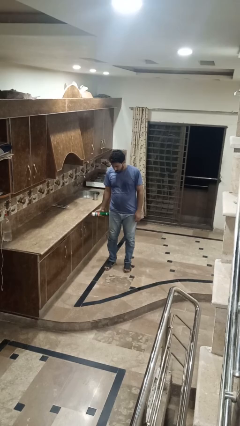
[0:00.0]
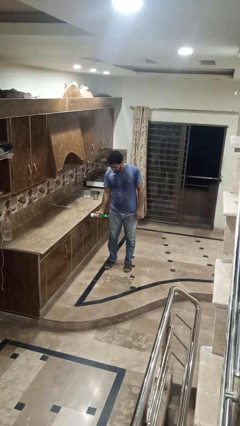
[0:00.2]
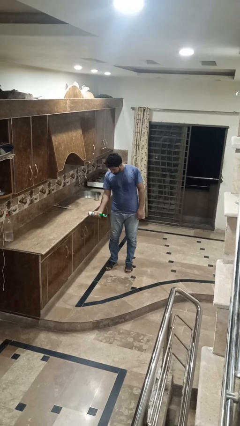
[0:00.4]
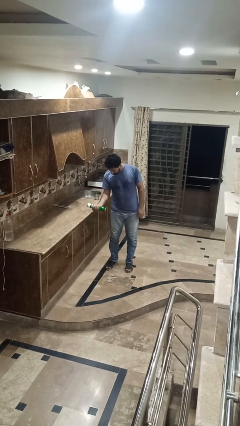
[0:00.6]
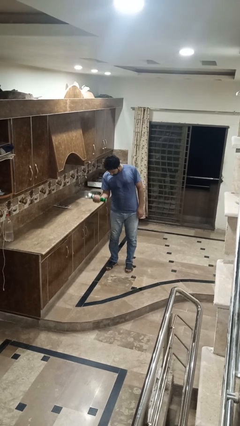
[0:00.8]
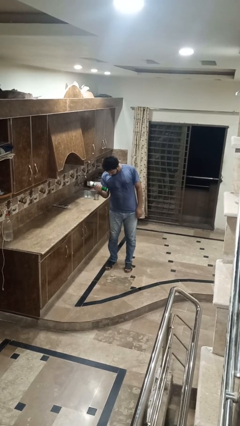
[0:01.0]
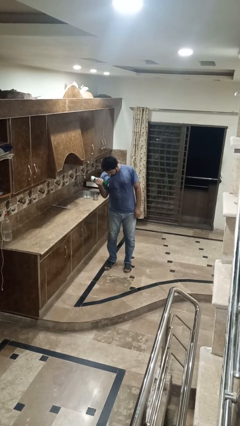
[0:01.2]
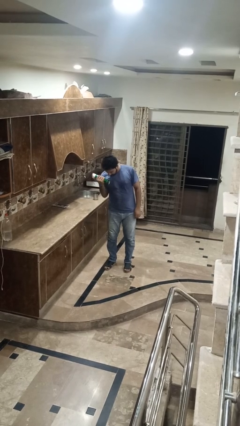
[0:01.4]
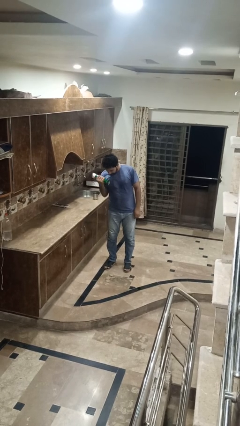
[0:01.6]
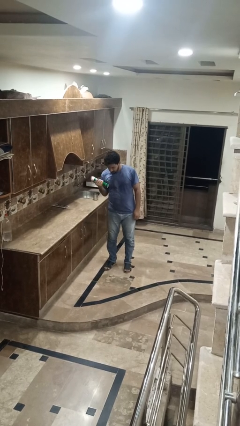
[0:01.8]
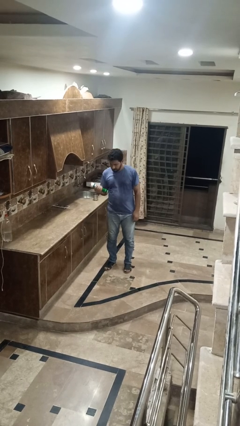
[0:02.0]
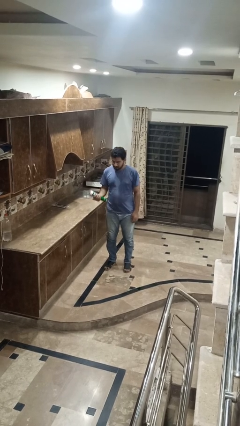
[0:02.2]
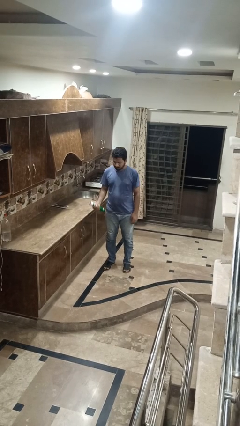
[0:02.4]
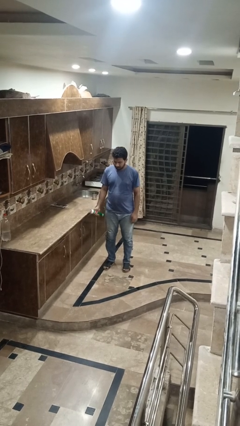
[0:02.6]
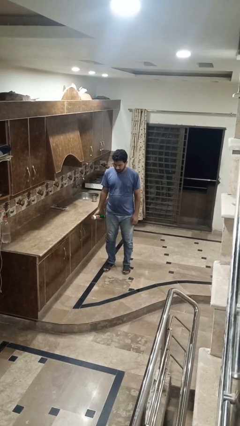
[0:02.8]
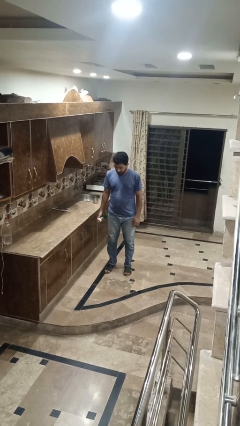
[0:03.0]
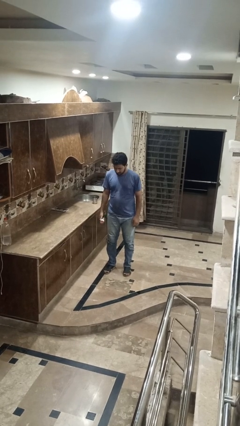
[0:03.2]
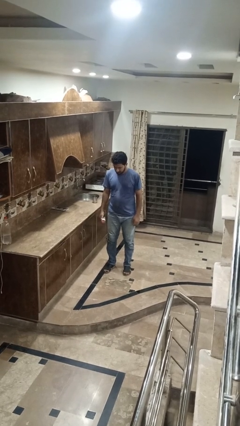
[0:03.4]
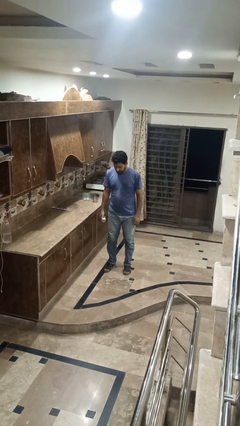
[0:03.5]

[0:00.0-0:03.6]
person lifts dumbbells

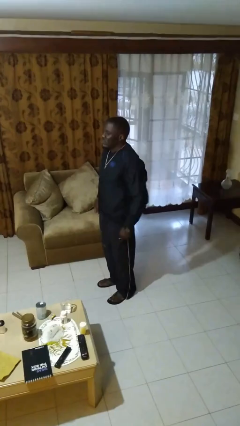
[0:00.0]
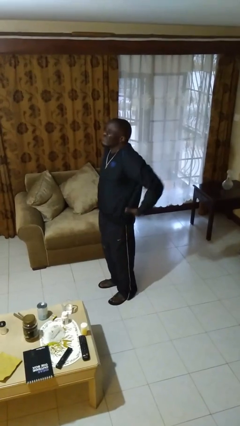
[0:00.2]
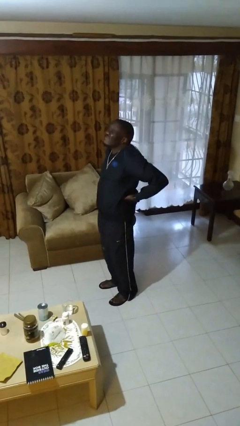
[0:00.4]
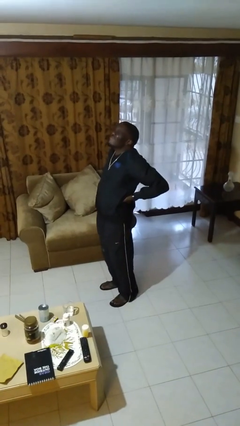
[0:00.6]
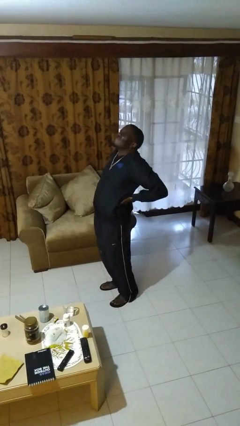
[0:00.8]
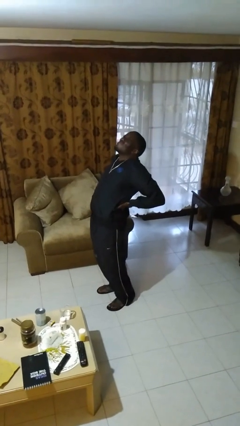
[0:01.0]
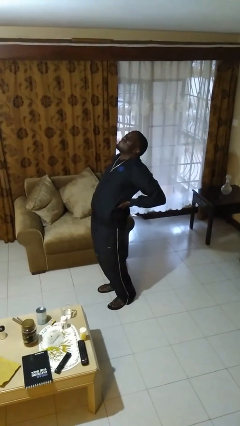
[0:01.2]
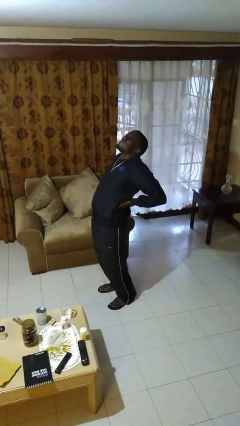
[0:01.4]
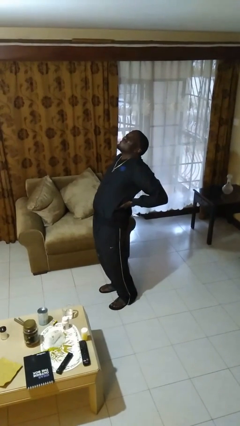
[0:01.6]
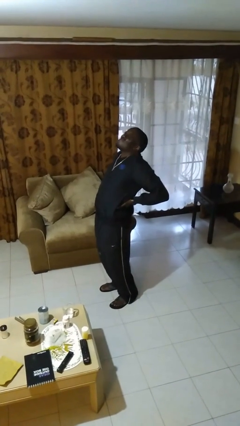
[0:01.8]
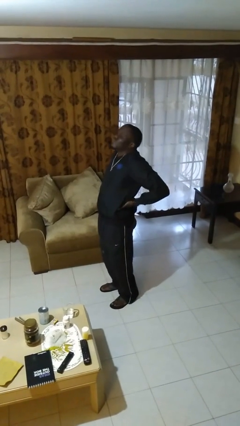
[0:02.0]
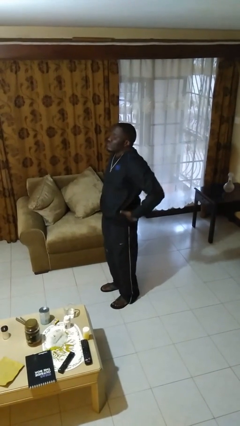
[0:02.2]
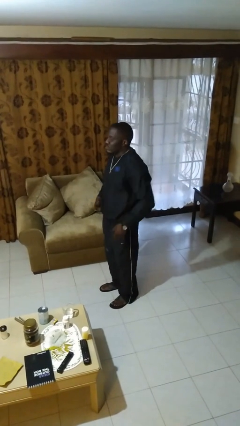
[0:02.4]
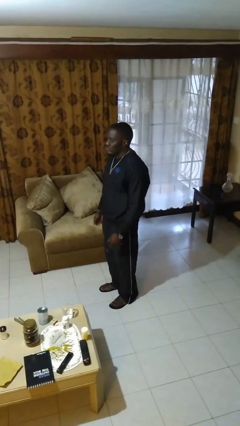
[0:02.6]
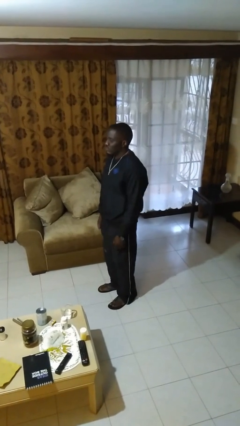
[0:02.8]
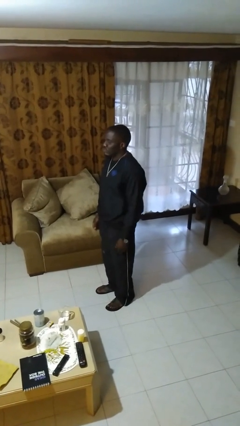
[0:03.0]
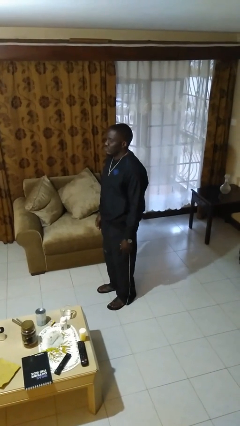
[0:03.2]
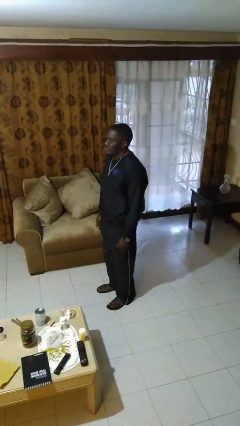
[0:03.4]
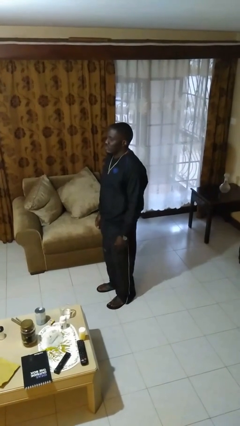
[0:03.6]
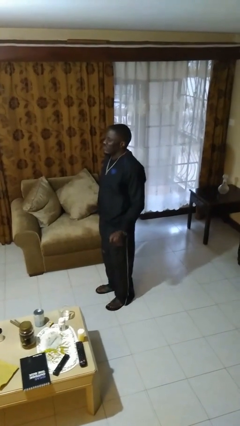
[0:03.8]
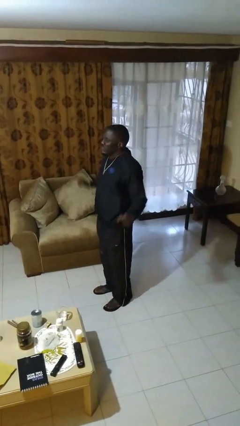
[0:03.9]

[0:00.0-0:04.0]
person stretches back

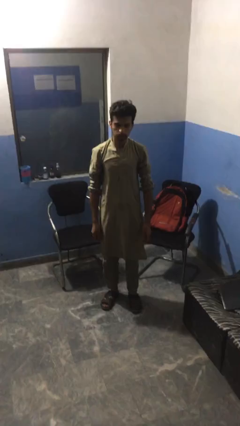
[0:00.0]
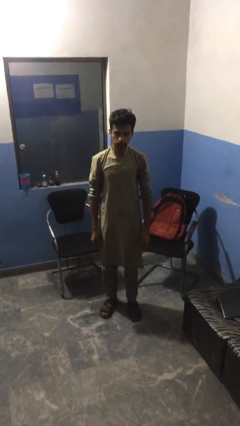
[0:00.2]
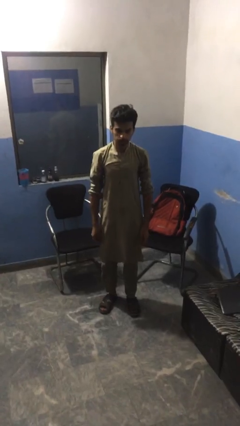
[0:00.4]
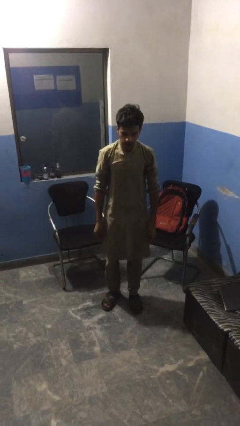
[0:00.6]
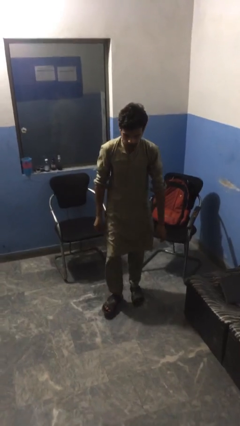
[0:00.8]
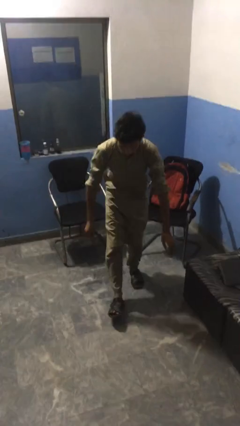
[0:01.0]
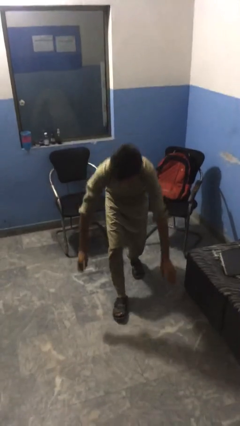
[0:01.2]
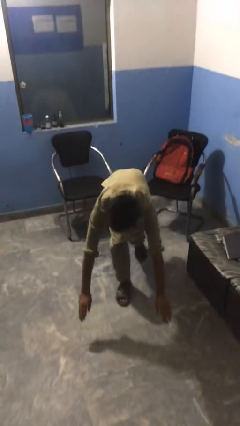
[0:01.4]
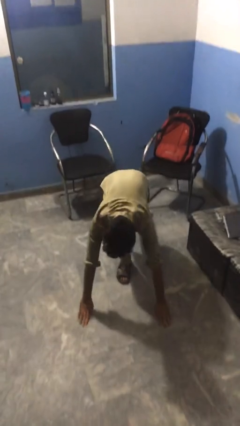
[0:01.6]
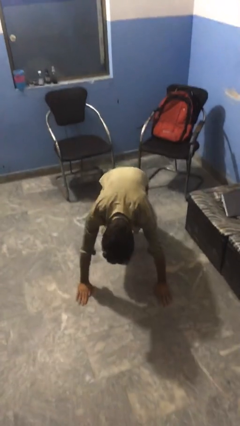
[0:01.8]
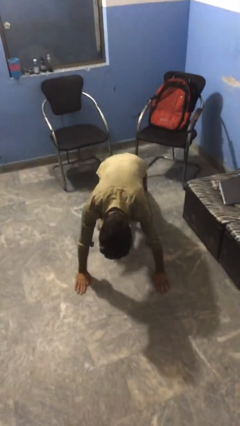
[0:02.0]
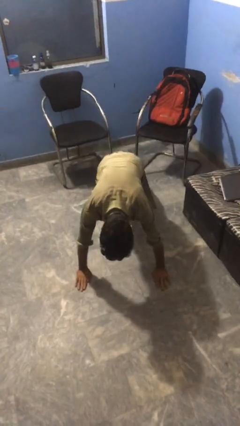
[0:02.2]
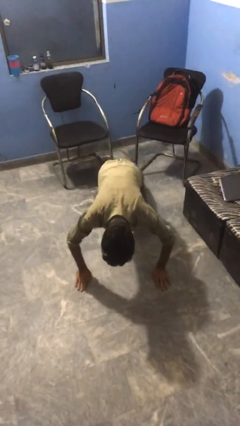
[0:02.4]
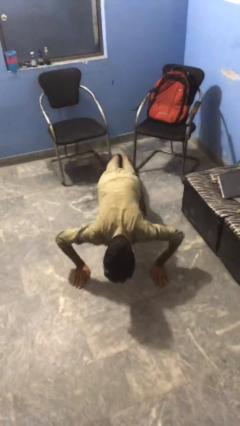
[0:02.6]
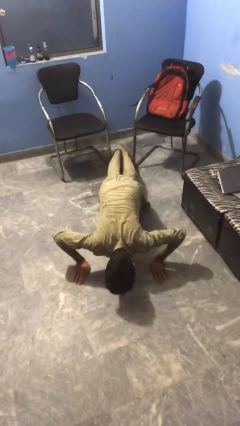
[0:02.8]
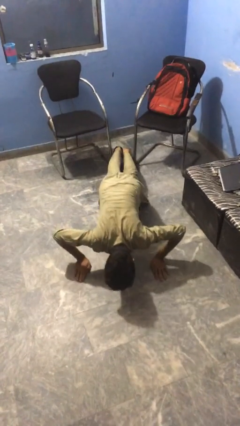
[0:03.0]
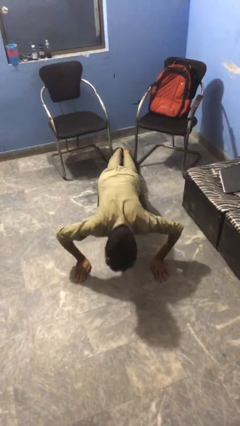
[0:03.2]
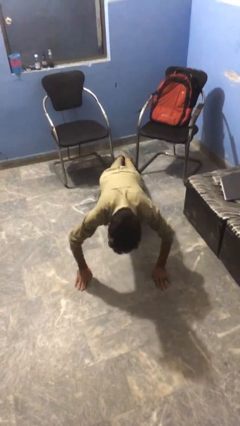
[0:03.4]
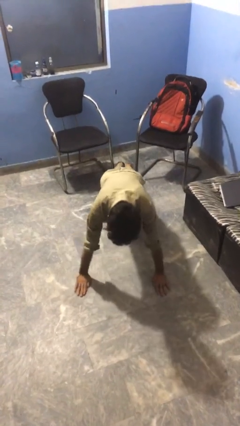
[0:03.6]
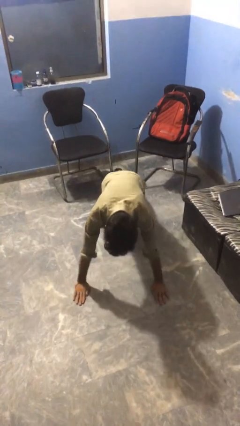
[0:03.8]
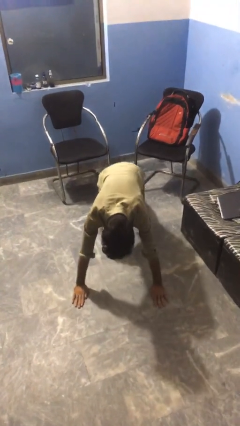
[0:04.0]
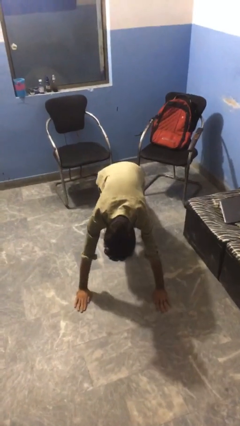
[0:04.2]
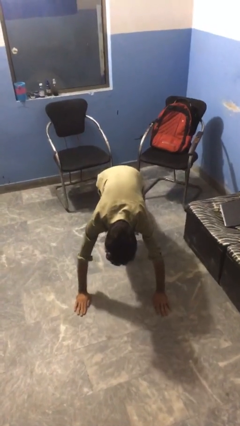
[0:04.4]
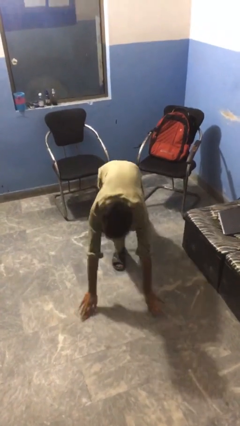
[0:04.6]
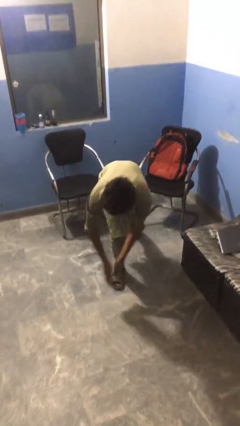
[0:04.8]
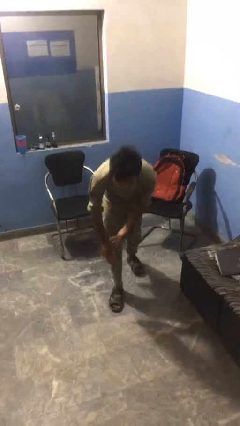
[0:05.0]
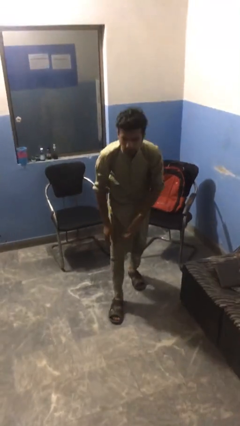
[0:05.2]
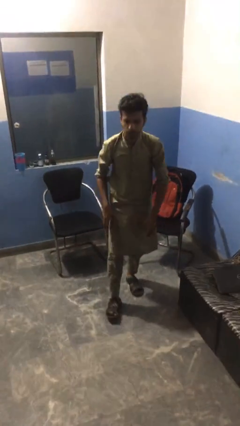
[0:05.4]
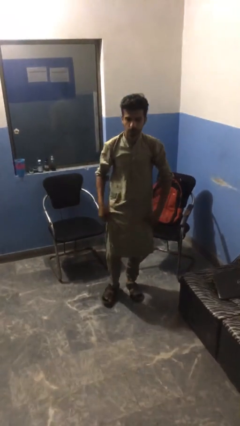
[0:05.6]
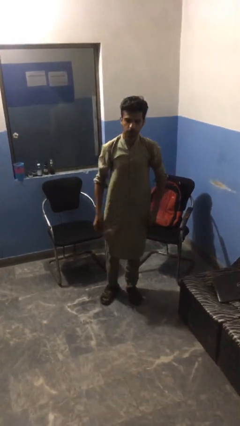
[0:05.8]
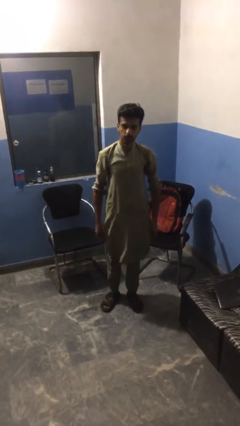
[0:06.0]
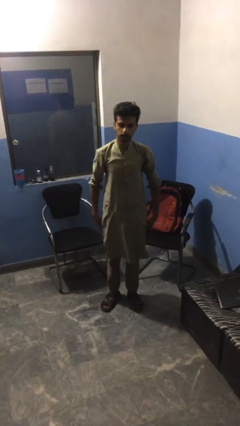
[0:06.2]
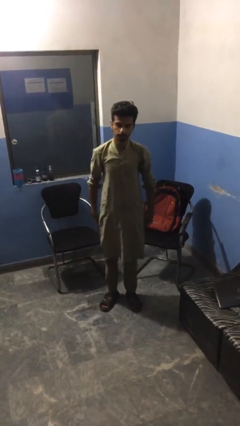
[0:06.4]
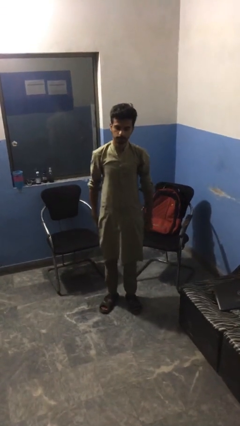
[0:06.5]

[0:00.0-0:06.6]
person exercises with pushup

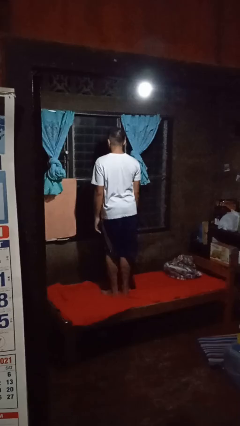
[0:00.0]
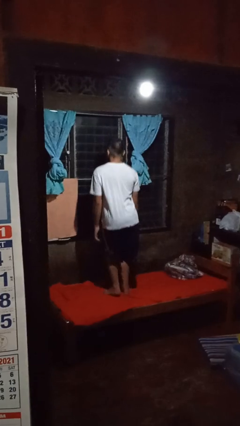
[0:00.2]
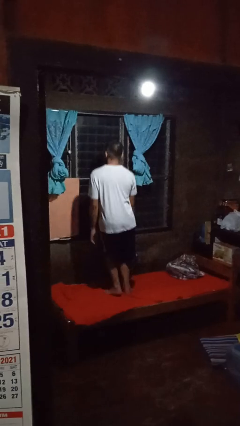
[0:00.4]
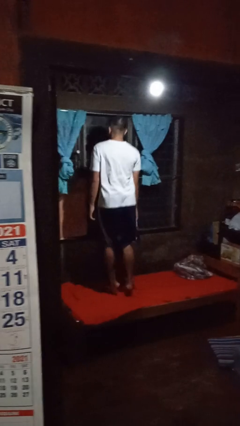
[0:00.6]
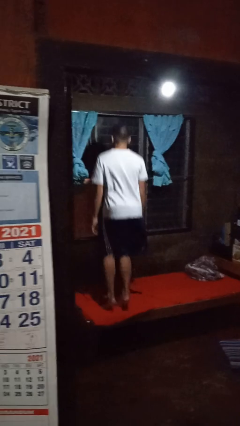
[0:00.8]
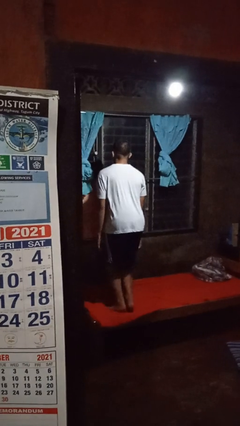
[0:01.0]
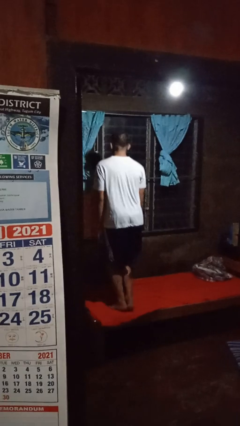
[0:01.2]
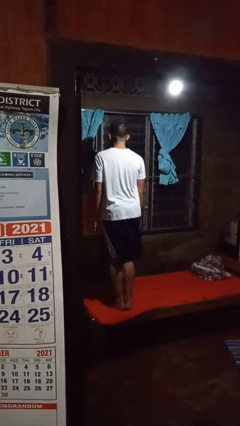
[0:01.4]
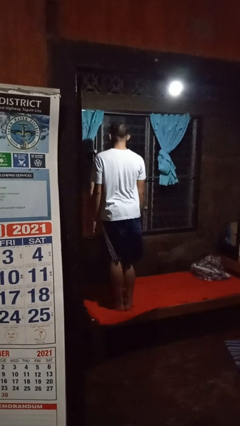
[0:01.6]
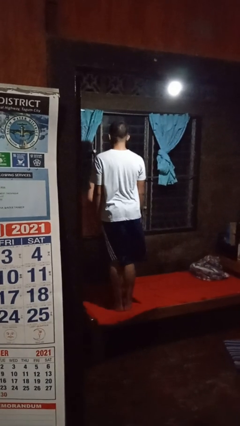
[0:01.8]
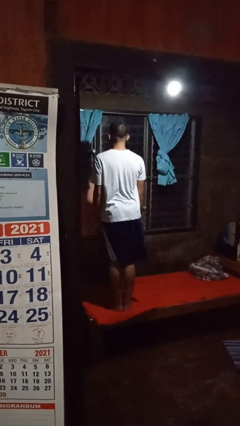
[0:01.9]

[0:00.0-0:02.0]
person jumps on bed

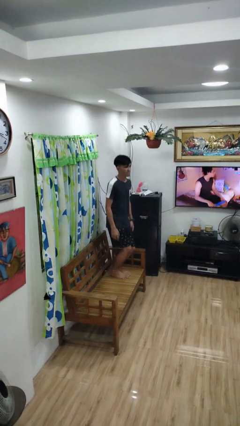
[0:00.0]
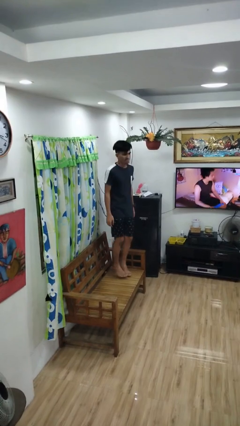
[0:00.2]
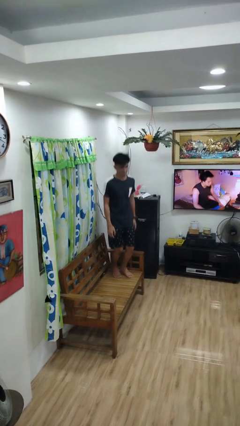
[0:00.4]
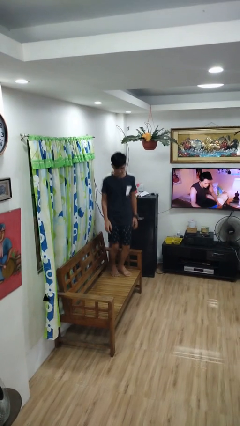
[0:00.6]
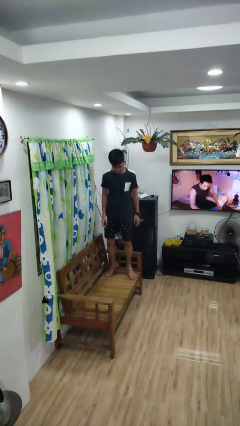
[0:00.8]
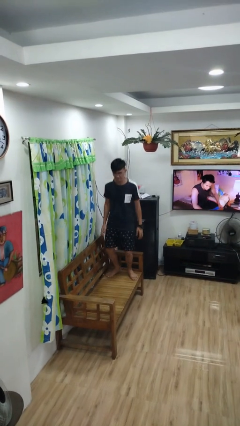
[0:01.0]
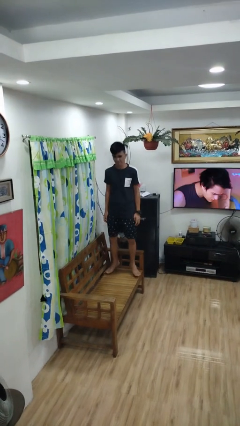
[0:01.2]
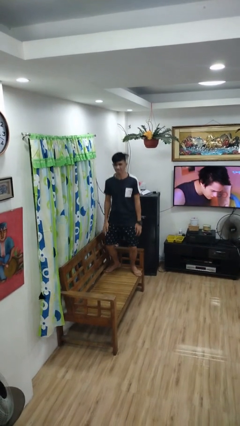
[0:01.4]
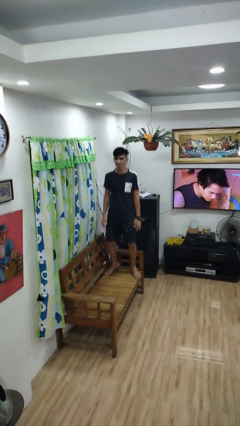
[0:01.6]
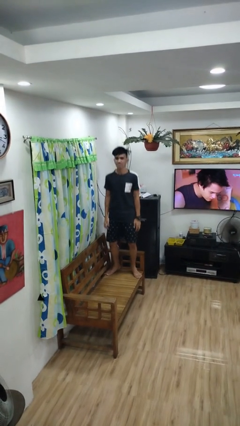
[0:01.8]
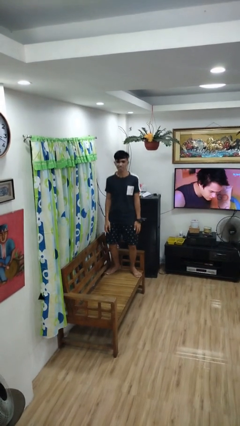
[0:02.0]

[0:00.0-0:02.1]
person jumps on couch
